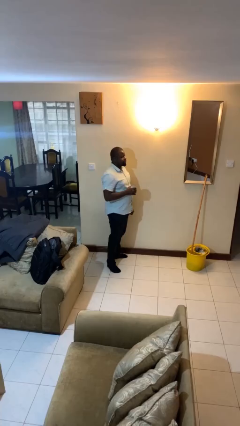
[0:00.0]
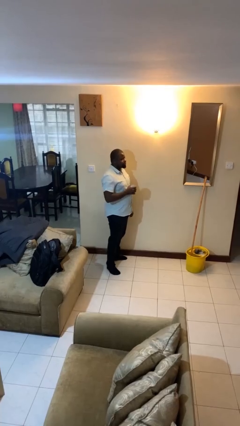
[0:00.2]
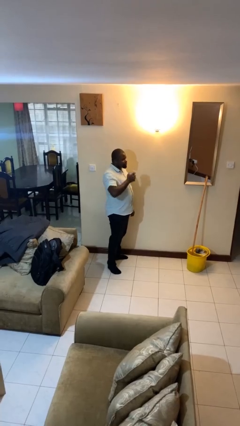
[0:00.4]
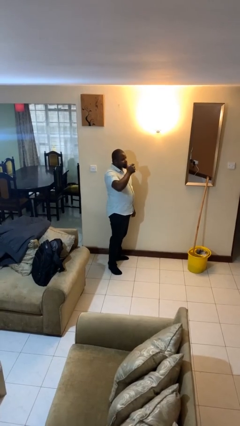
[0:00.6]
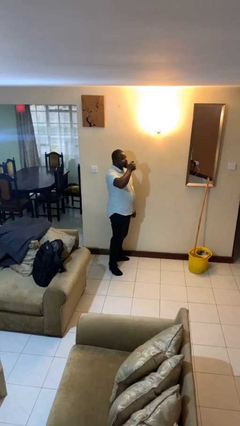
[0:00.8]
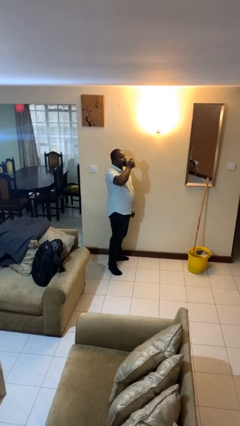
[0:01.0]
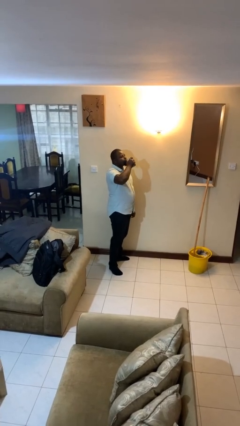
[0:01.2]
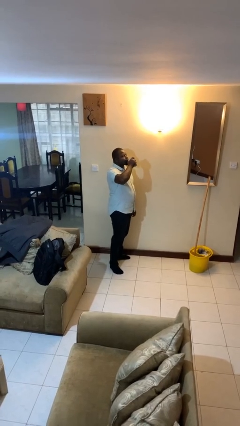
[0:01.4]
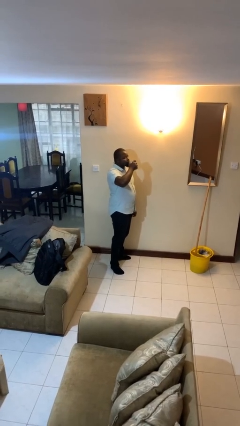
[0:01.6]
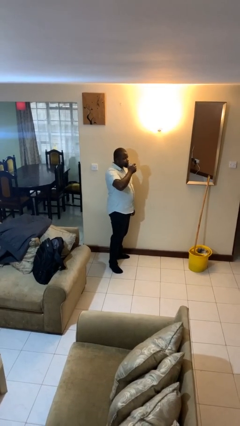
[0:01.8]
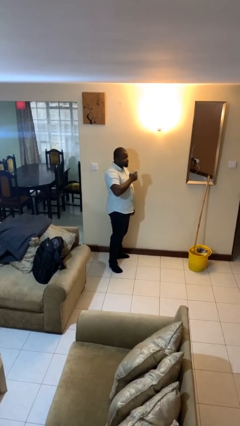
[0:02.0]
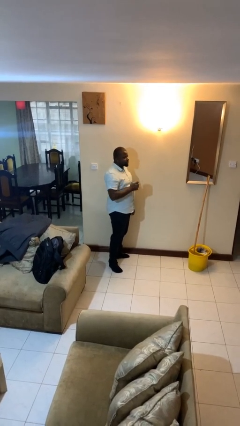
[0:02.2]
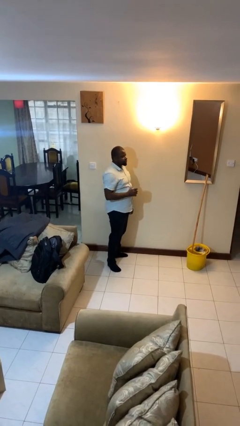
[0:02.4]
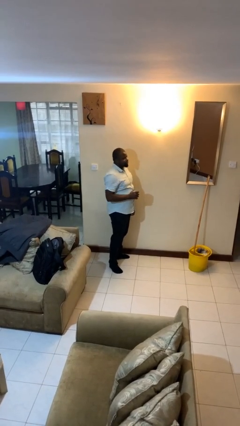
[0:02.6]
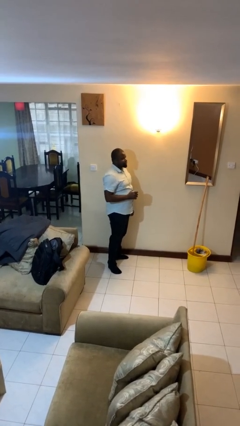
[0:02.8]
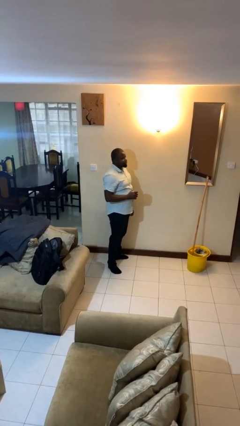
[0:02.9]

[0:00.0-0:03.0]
person drinks from beverage can

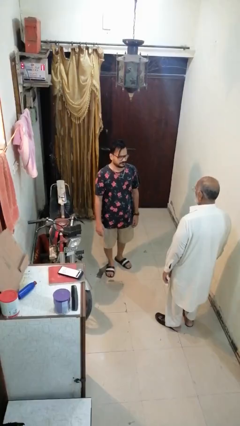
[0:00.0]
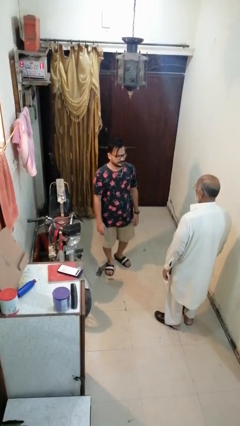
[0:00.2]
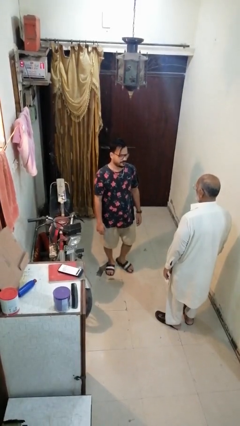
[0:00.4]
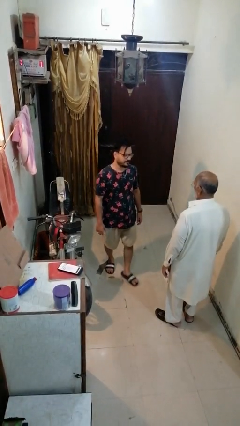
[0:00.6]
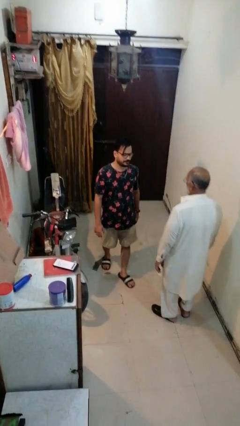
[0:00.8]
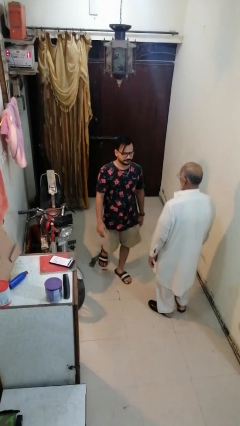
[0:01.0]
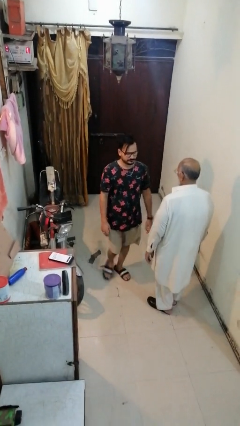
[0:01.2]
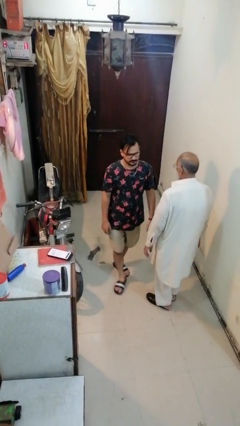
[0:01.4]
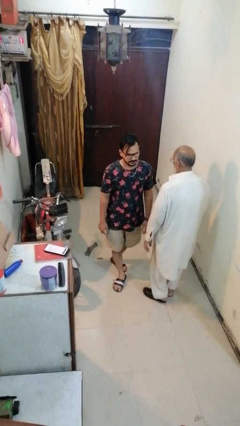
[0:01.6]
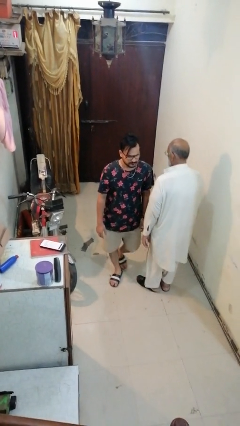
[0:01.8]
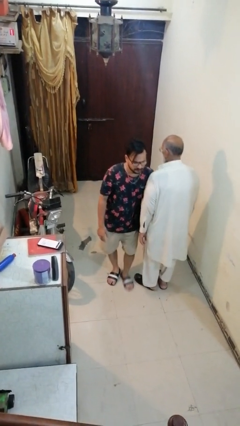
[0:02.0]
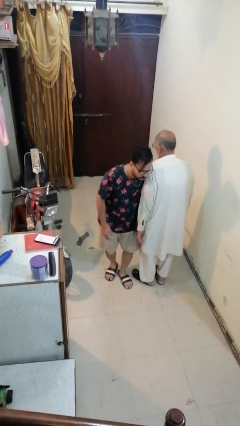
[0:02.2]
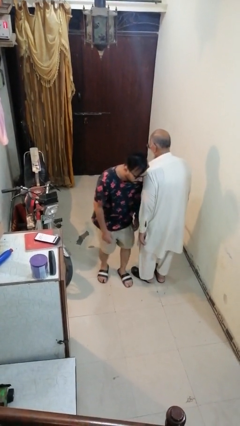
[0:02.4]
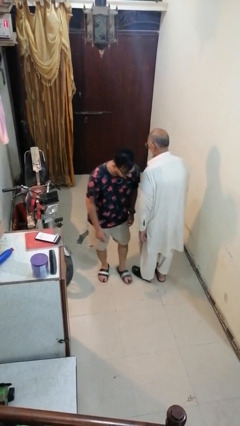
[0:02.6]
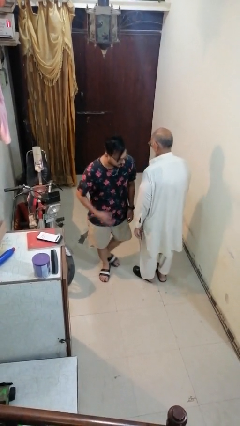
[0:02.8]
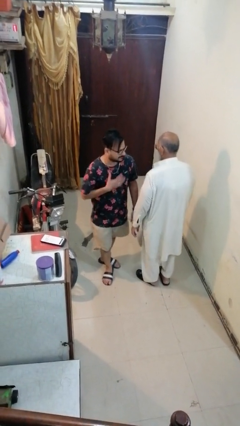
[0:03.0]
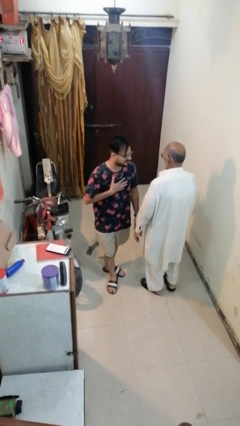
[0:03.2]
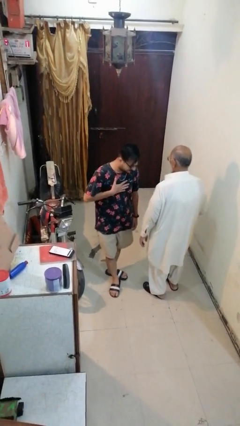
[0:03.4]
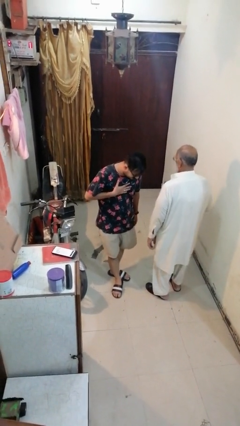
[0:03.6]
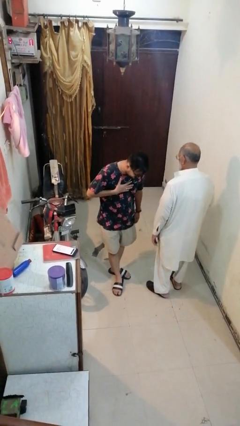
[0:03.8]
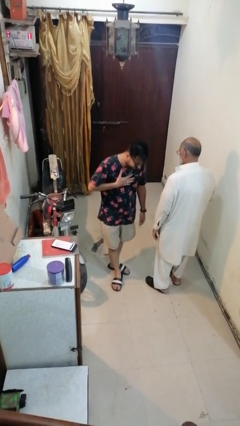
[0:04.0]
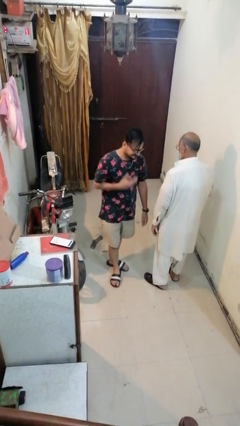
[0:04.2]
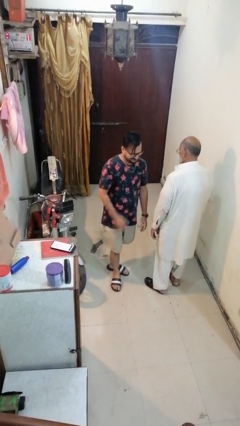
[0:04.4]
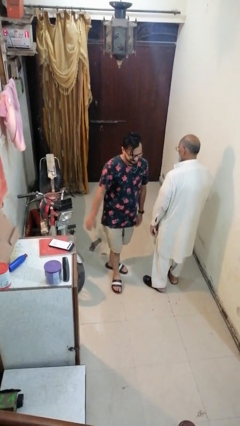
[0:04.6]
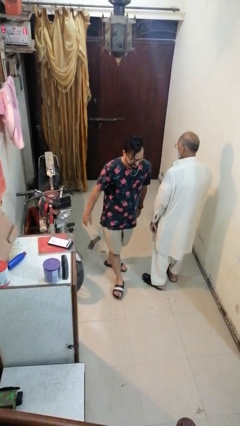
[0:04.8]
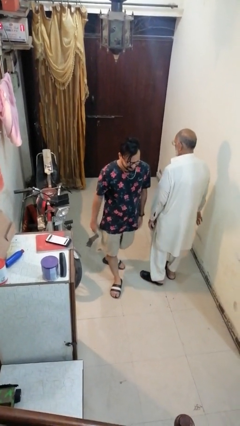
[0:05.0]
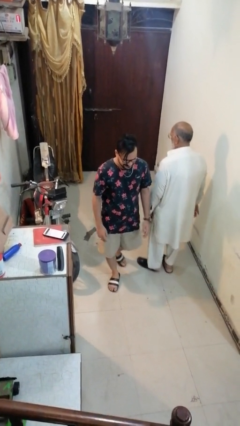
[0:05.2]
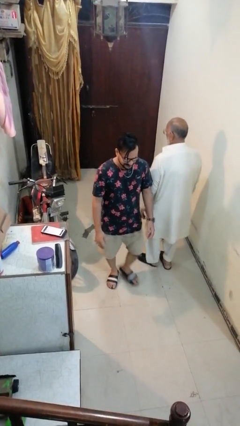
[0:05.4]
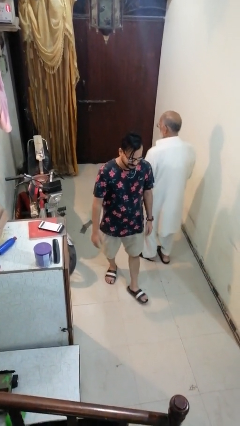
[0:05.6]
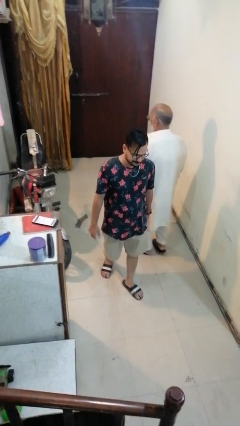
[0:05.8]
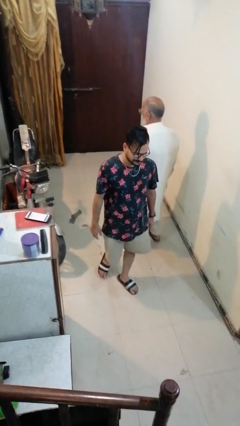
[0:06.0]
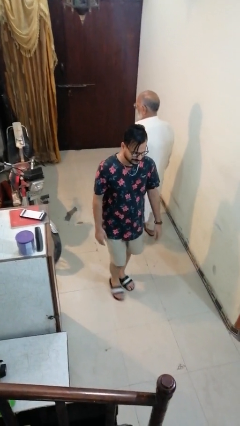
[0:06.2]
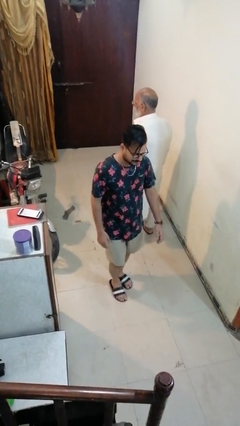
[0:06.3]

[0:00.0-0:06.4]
person bumps into person

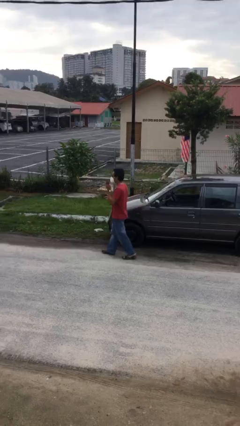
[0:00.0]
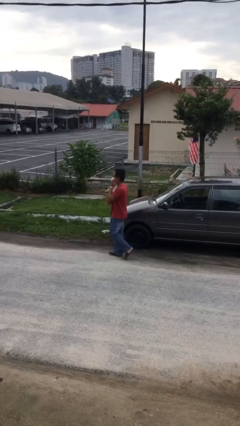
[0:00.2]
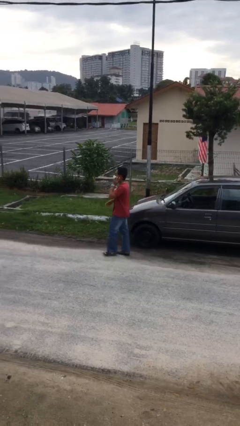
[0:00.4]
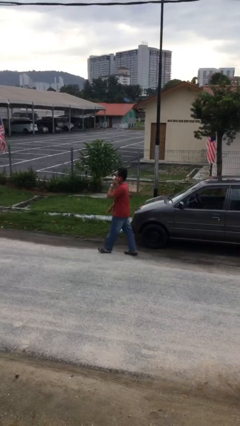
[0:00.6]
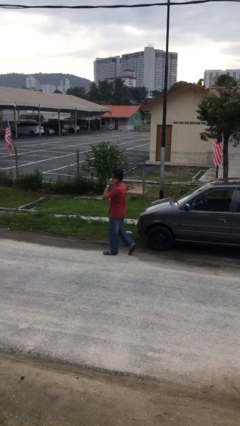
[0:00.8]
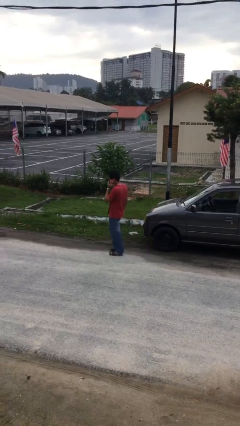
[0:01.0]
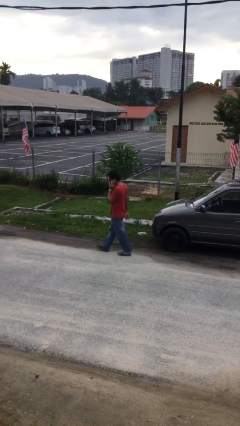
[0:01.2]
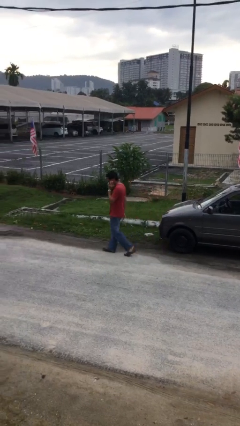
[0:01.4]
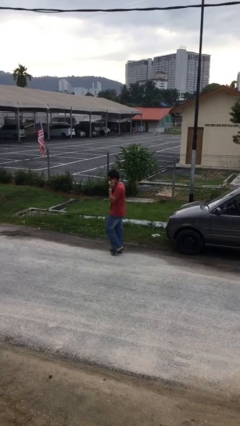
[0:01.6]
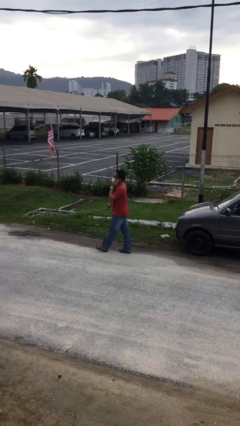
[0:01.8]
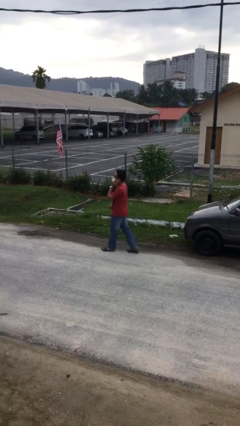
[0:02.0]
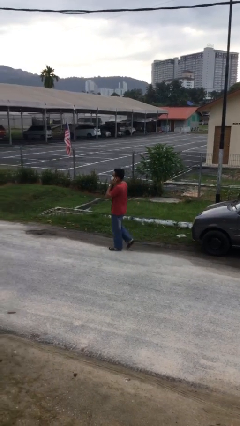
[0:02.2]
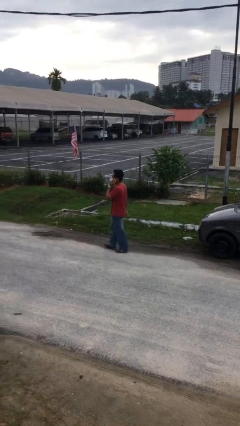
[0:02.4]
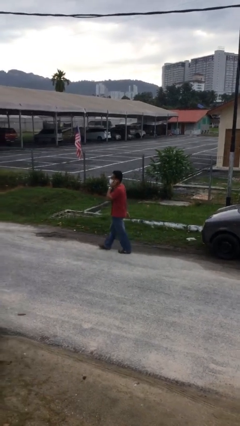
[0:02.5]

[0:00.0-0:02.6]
person talks on phone

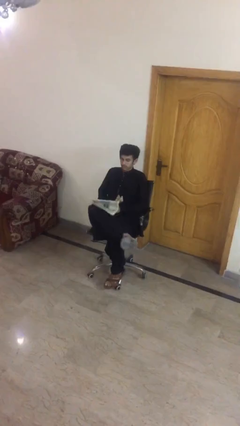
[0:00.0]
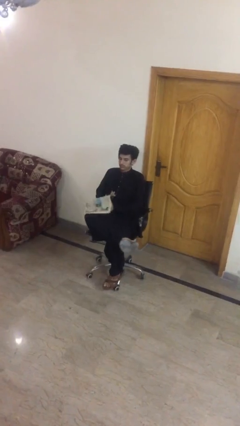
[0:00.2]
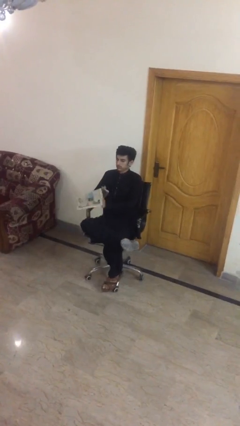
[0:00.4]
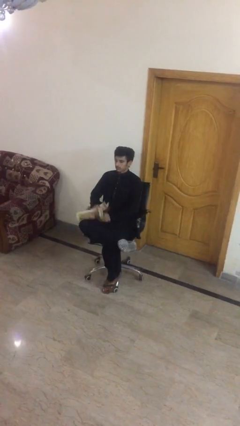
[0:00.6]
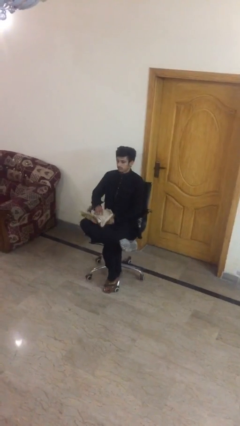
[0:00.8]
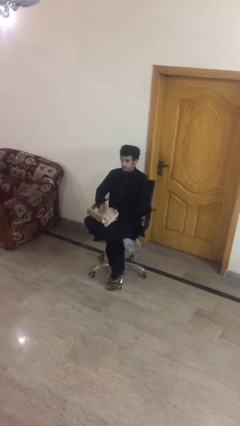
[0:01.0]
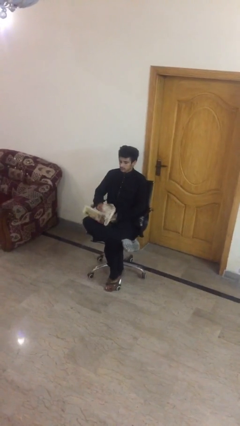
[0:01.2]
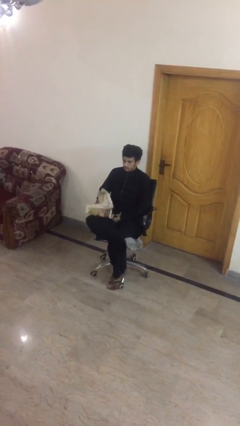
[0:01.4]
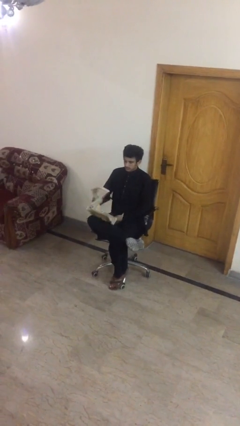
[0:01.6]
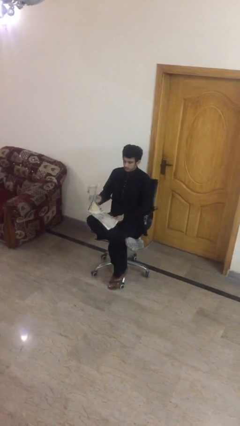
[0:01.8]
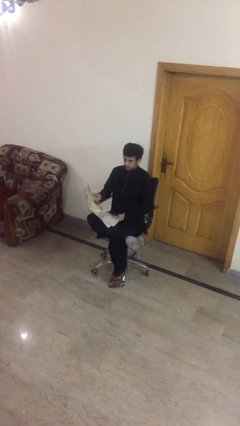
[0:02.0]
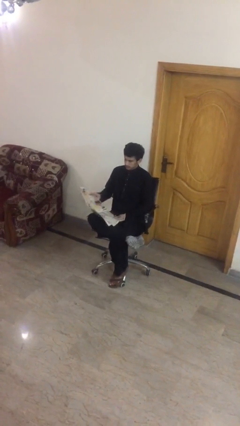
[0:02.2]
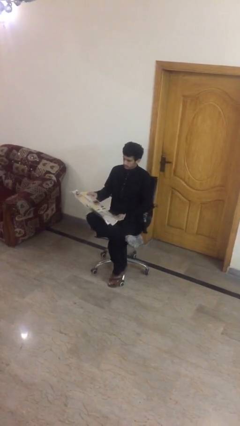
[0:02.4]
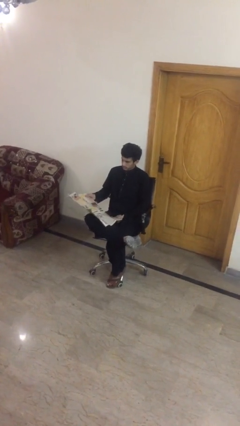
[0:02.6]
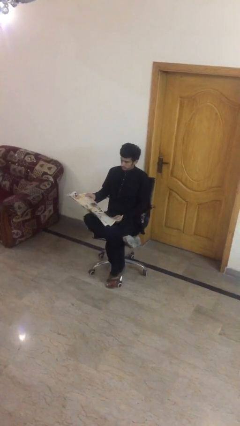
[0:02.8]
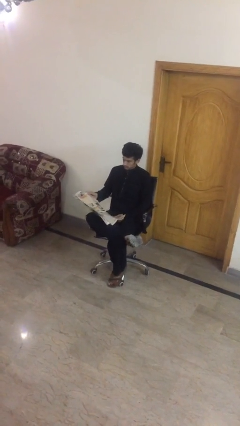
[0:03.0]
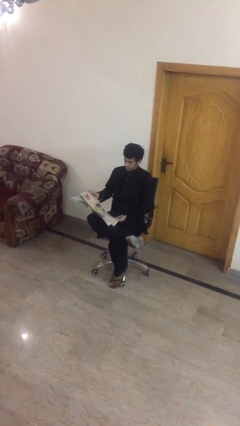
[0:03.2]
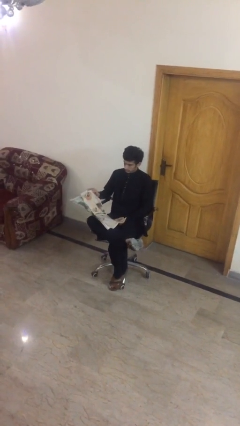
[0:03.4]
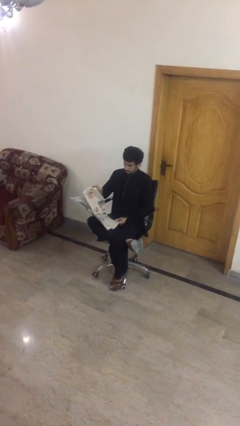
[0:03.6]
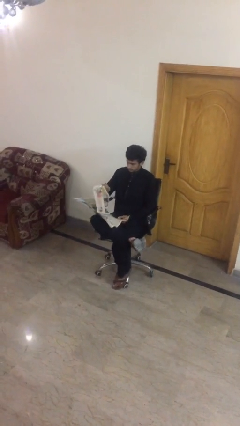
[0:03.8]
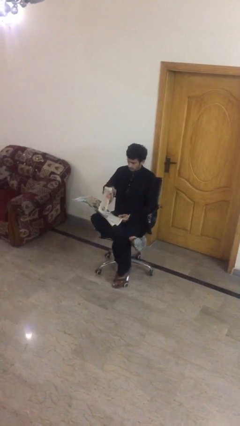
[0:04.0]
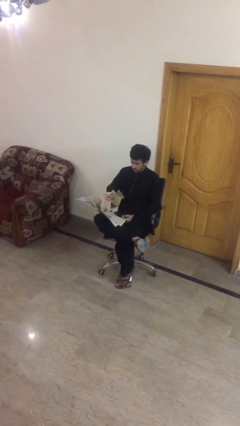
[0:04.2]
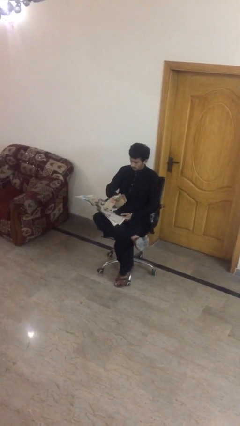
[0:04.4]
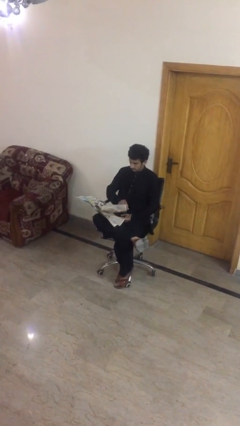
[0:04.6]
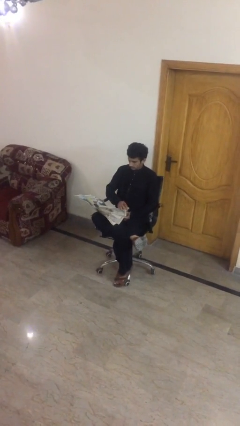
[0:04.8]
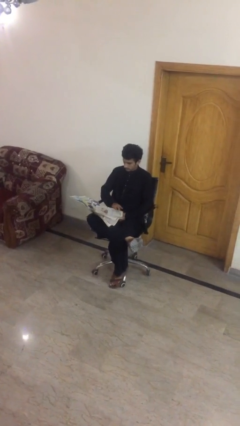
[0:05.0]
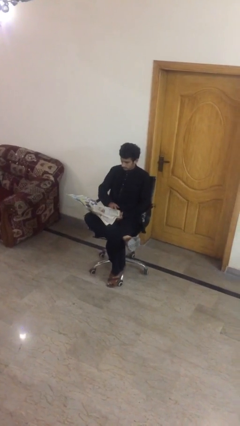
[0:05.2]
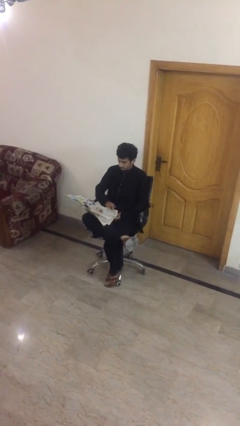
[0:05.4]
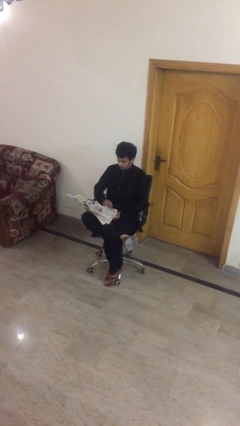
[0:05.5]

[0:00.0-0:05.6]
person reads document

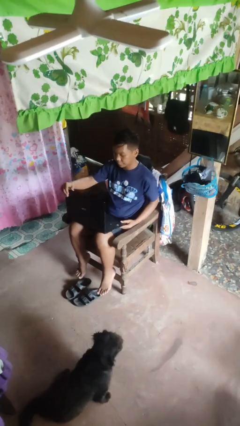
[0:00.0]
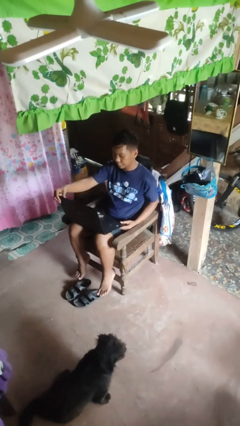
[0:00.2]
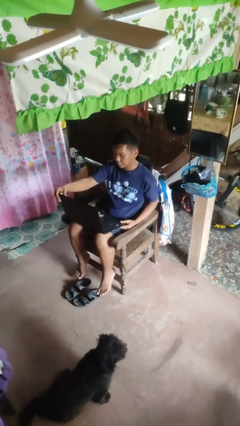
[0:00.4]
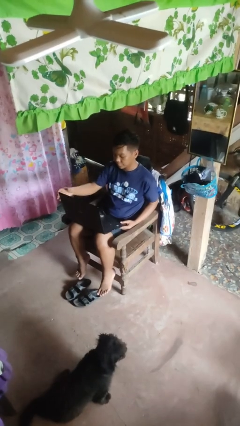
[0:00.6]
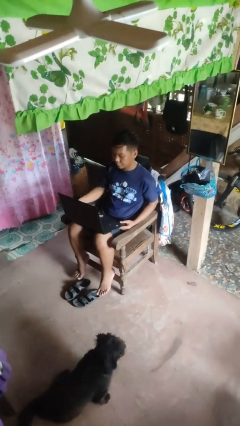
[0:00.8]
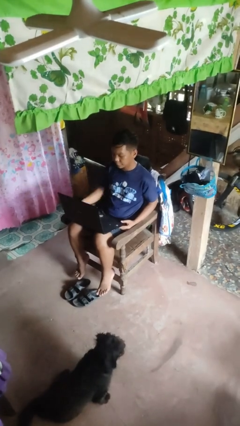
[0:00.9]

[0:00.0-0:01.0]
person opens laptop
